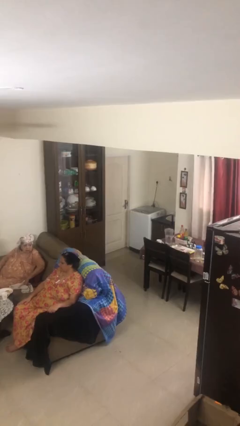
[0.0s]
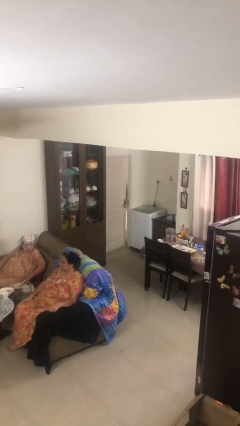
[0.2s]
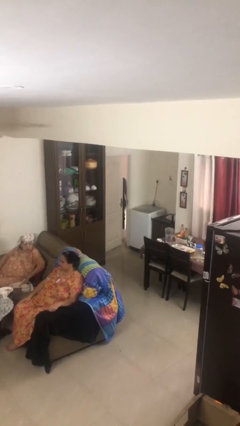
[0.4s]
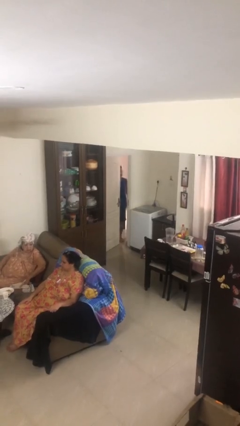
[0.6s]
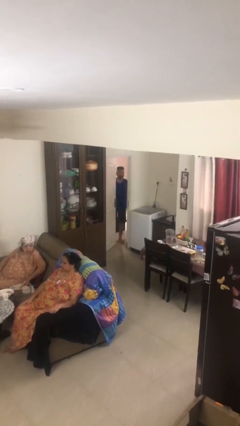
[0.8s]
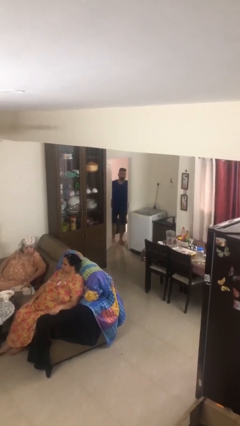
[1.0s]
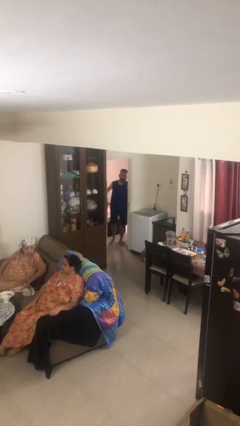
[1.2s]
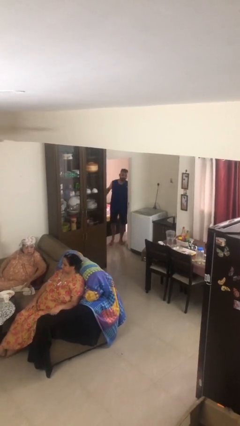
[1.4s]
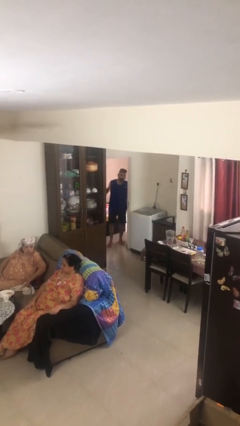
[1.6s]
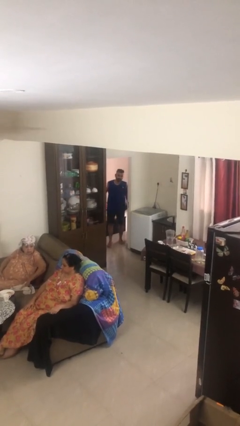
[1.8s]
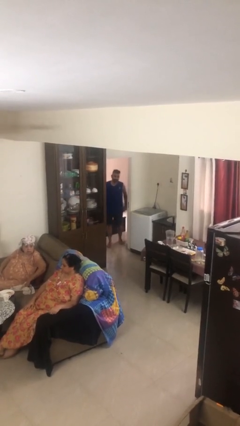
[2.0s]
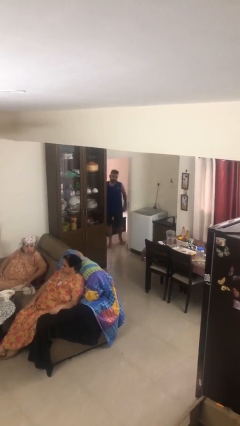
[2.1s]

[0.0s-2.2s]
person opens facility door

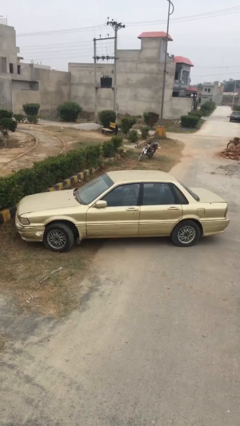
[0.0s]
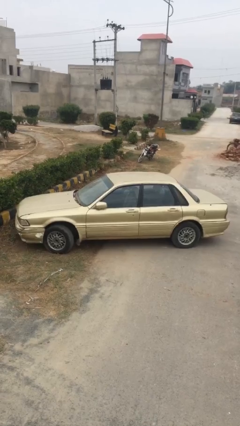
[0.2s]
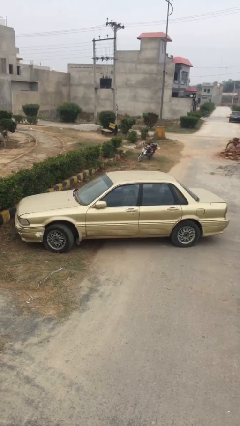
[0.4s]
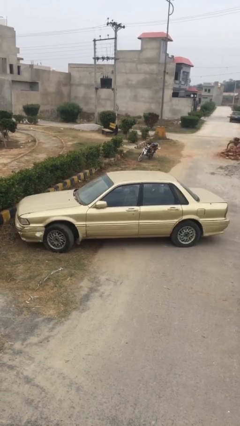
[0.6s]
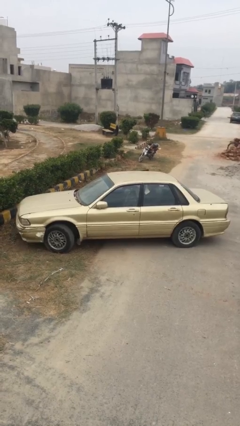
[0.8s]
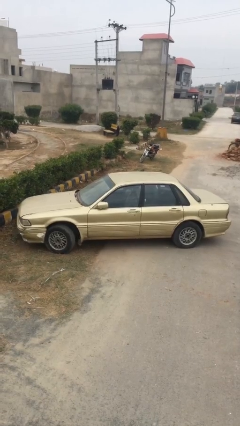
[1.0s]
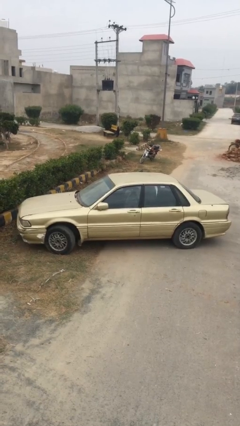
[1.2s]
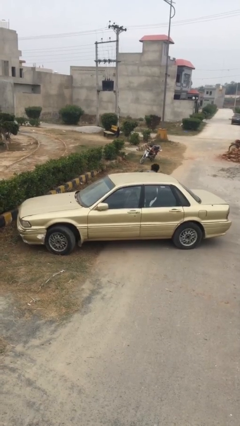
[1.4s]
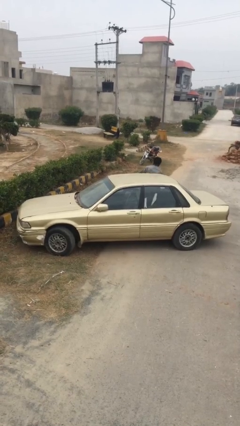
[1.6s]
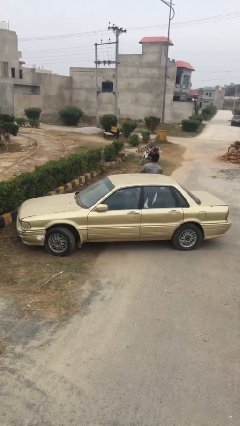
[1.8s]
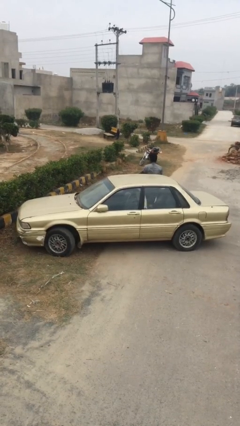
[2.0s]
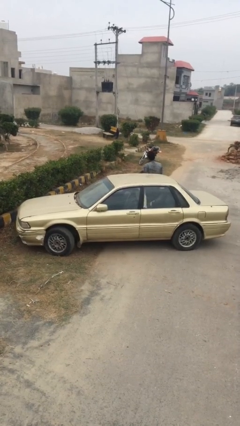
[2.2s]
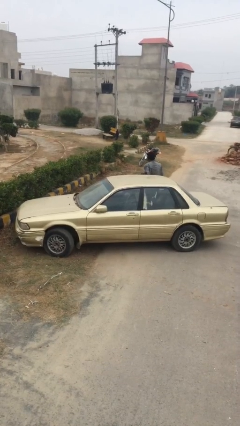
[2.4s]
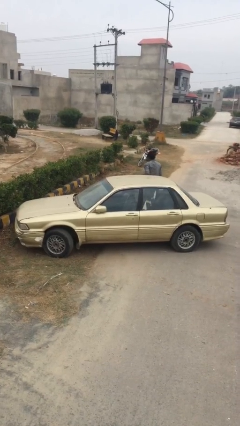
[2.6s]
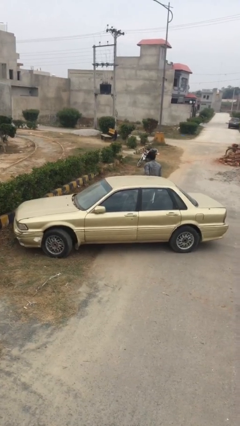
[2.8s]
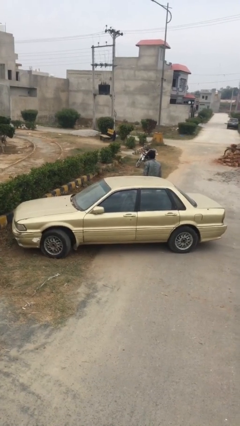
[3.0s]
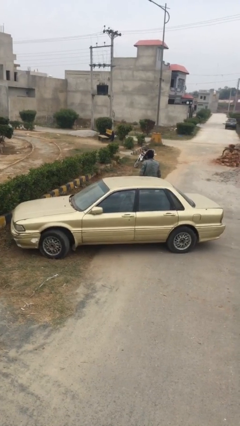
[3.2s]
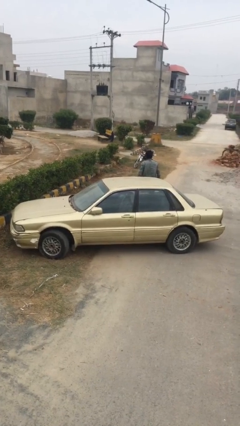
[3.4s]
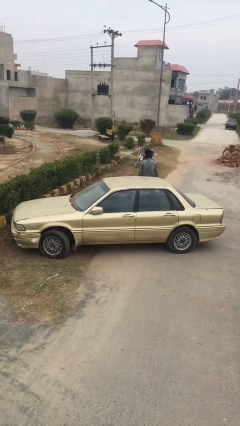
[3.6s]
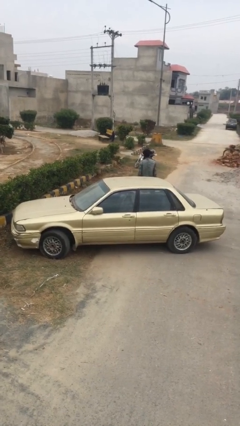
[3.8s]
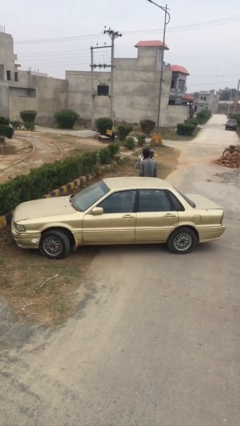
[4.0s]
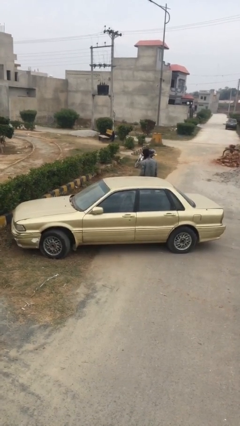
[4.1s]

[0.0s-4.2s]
car drops off person

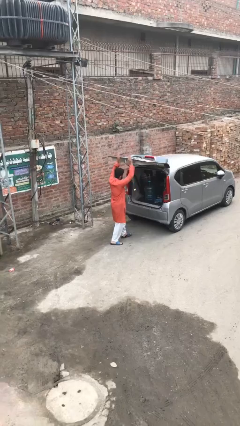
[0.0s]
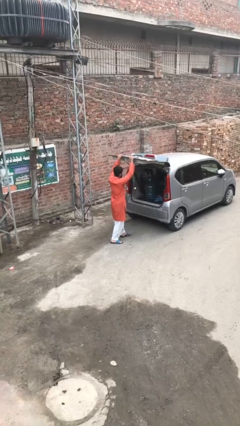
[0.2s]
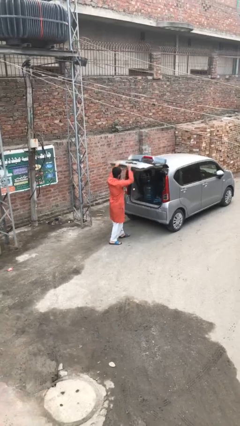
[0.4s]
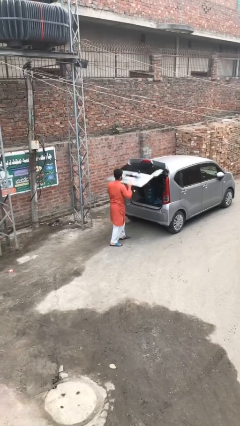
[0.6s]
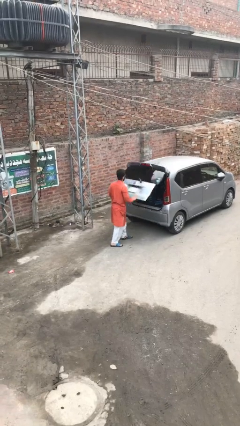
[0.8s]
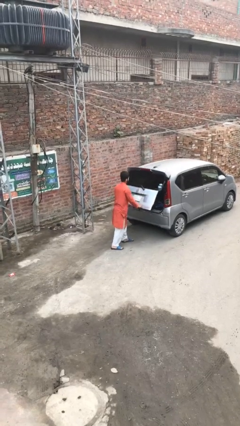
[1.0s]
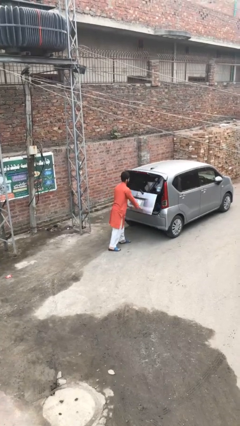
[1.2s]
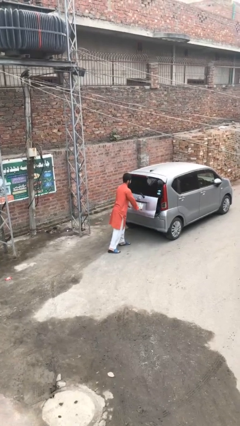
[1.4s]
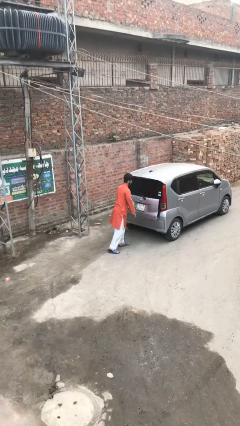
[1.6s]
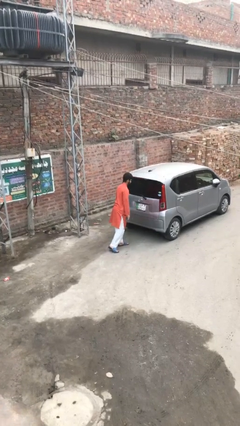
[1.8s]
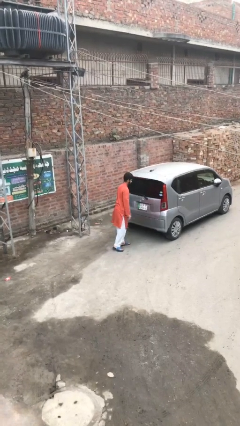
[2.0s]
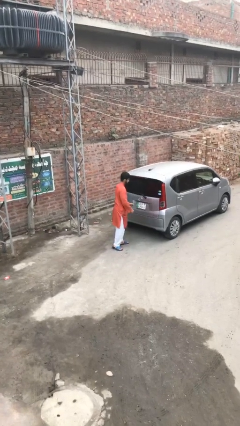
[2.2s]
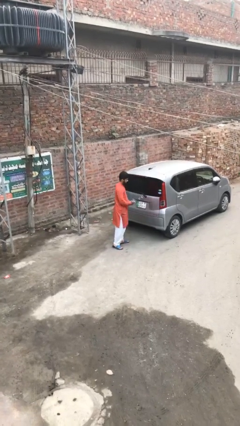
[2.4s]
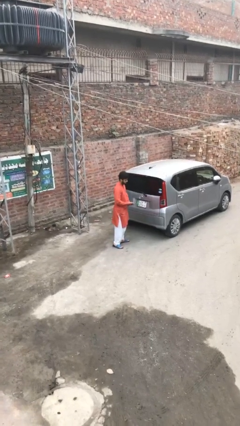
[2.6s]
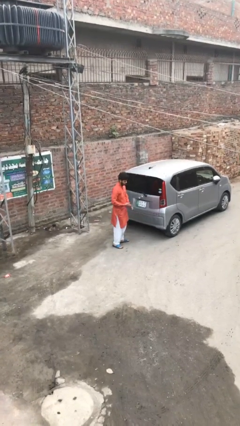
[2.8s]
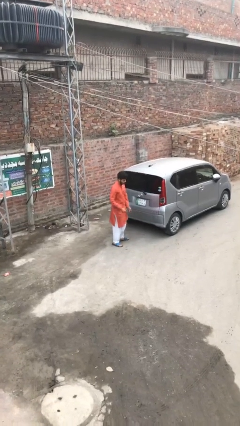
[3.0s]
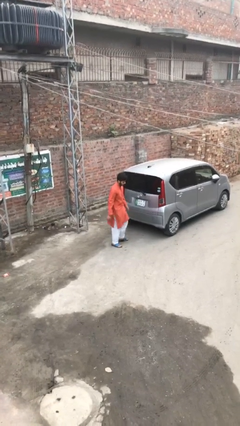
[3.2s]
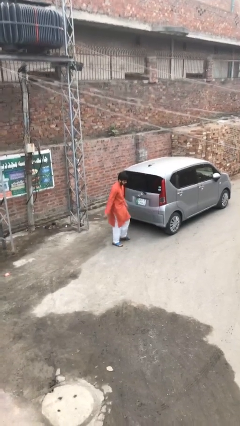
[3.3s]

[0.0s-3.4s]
person closes car trunk

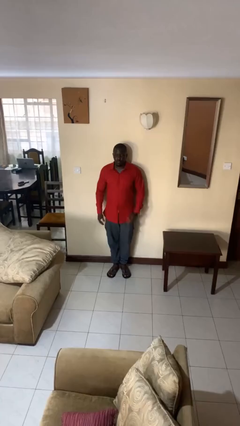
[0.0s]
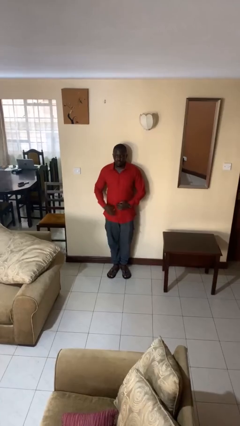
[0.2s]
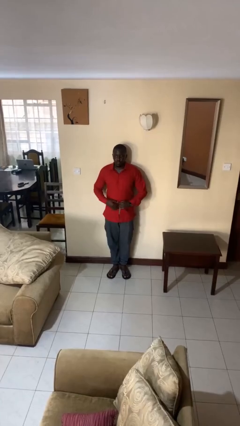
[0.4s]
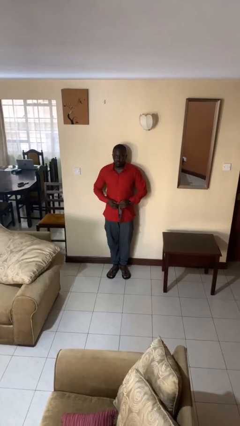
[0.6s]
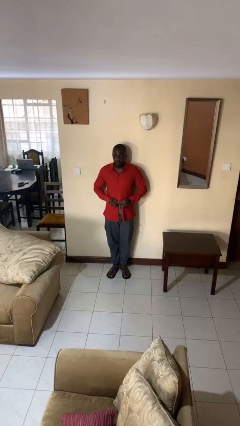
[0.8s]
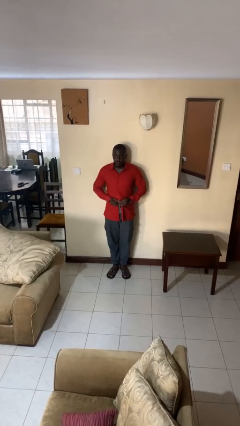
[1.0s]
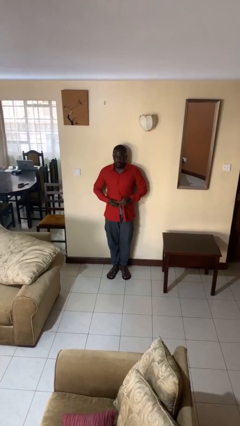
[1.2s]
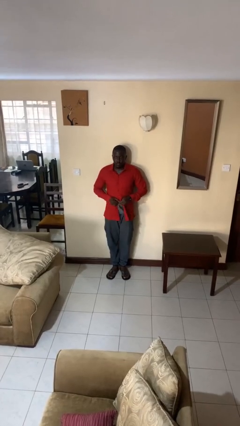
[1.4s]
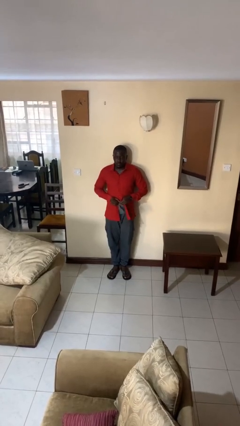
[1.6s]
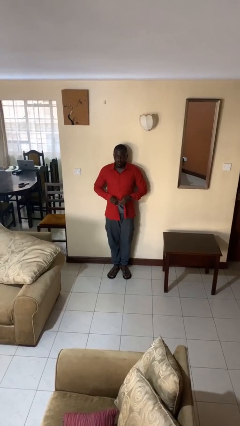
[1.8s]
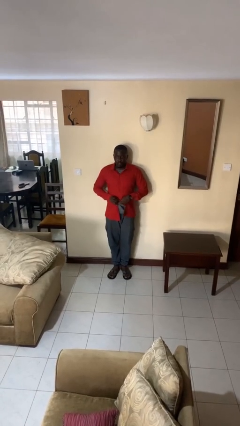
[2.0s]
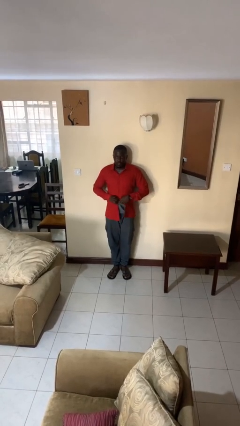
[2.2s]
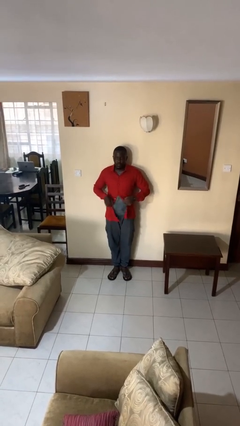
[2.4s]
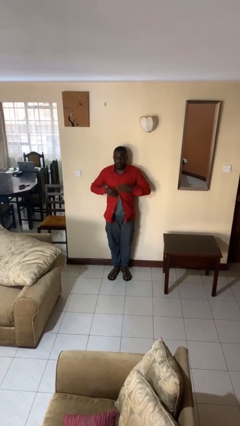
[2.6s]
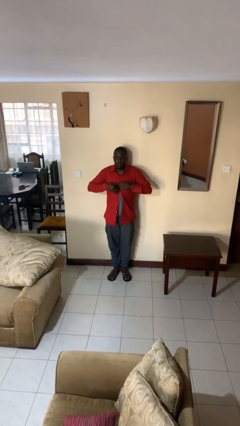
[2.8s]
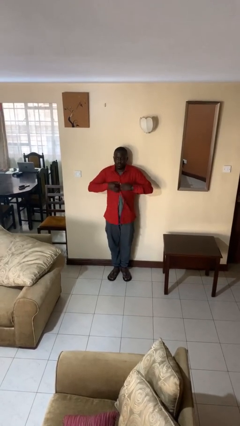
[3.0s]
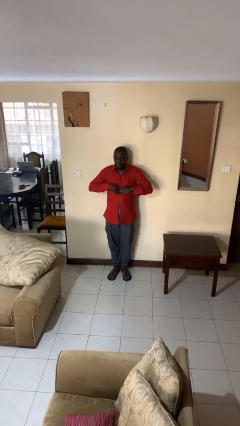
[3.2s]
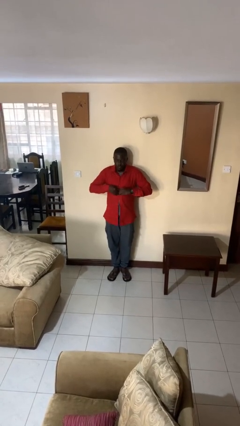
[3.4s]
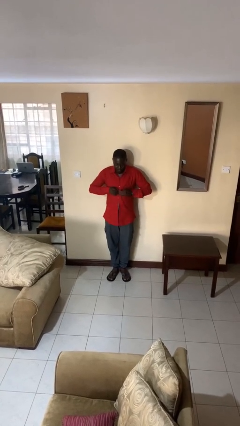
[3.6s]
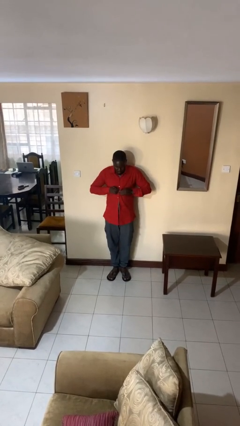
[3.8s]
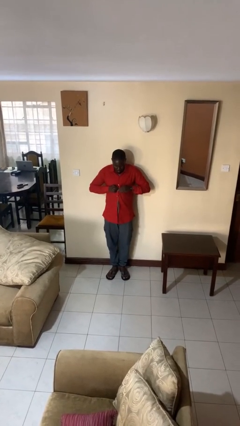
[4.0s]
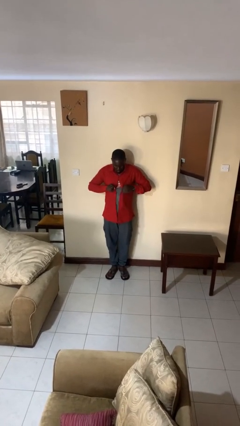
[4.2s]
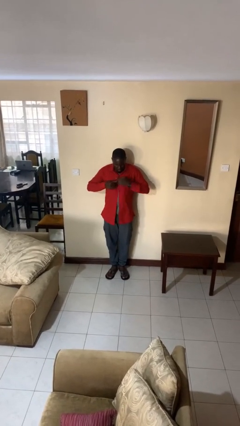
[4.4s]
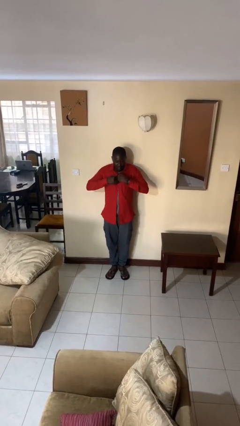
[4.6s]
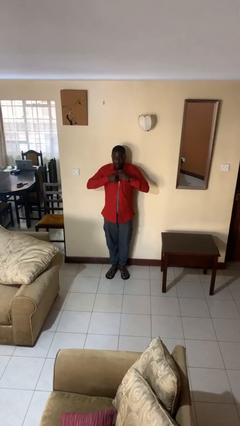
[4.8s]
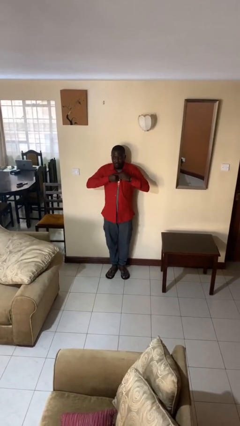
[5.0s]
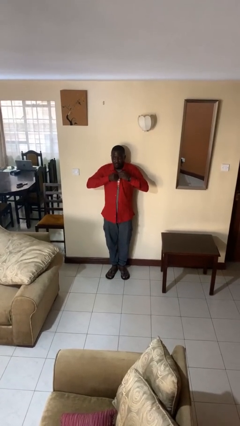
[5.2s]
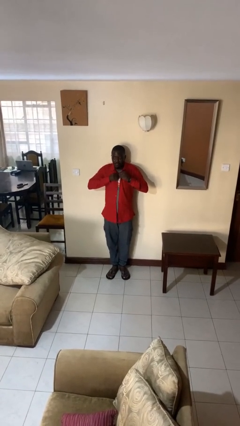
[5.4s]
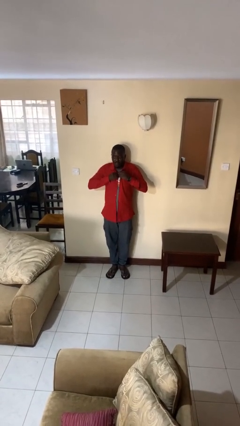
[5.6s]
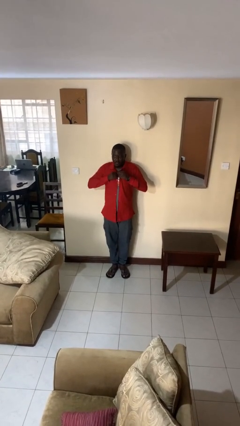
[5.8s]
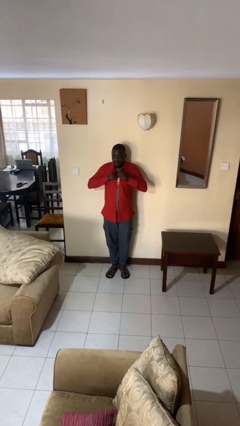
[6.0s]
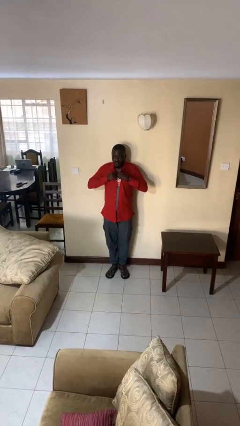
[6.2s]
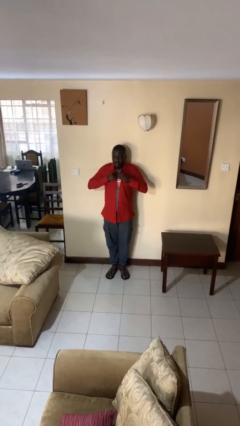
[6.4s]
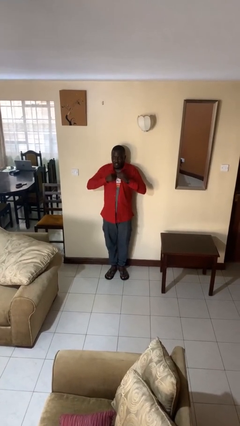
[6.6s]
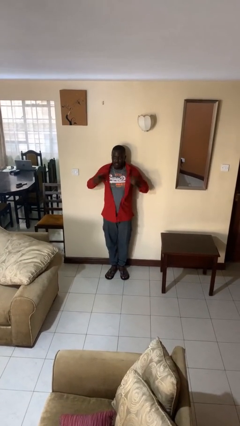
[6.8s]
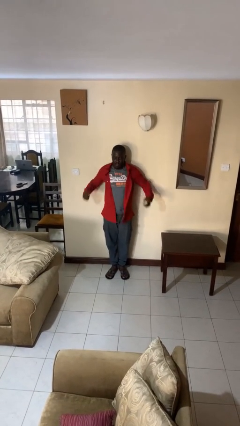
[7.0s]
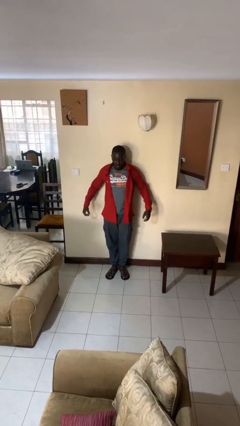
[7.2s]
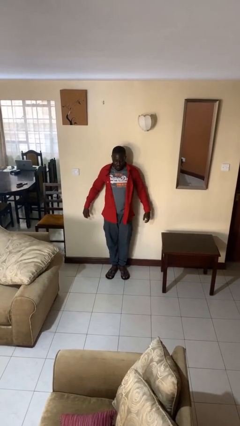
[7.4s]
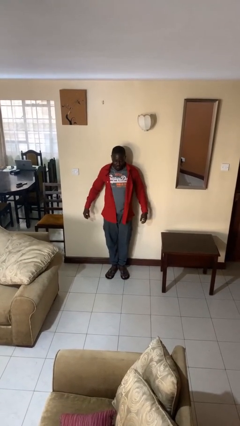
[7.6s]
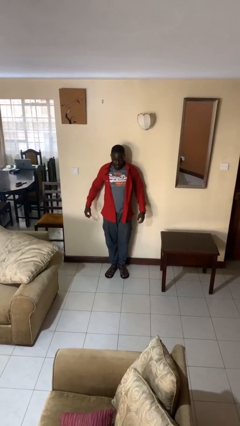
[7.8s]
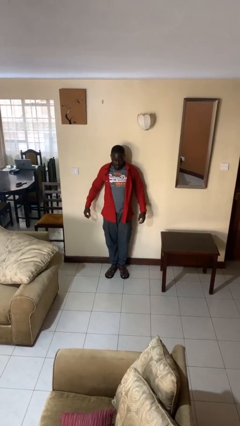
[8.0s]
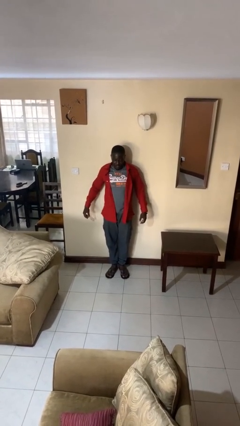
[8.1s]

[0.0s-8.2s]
person unbuttons shirt
